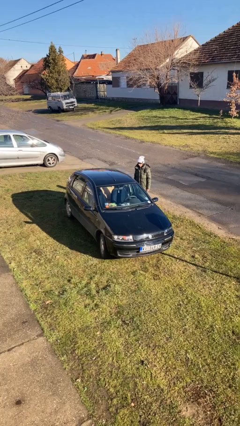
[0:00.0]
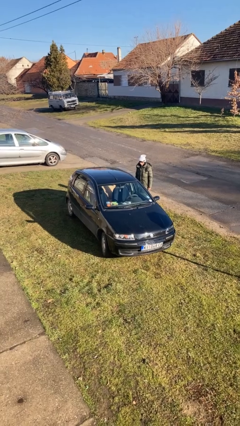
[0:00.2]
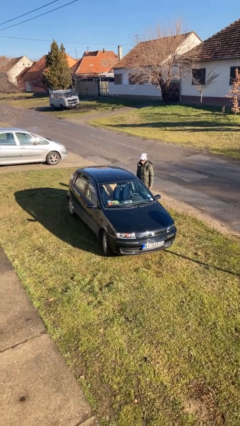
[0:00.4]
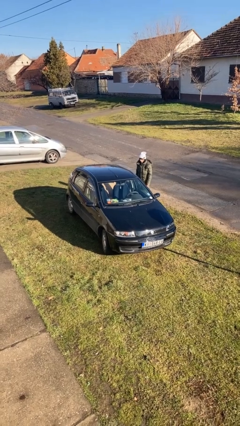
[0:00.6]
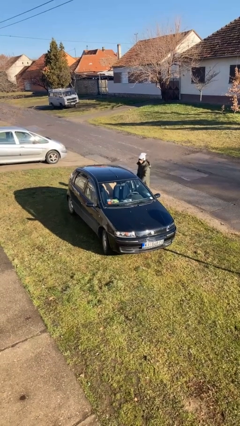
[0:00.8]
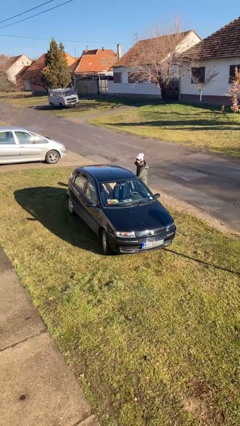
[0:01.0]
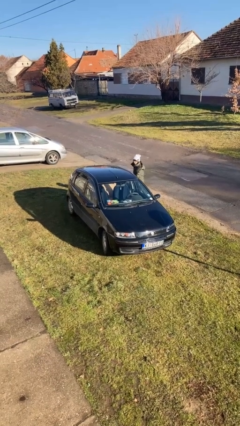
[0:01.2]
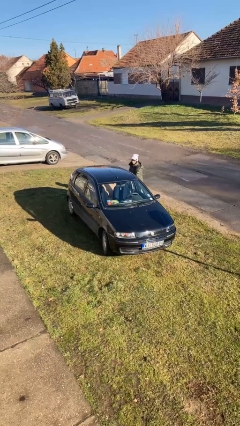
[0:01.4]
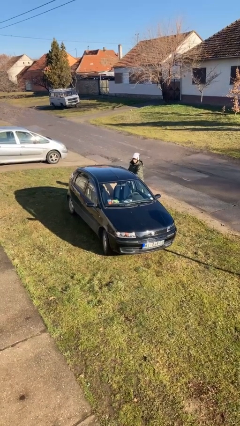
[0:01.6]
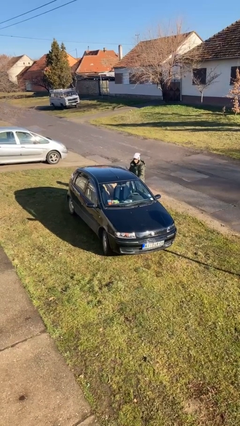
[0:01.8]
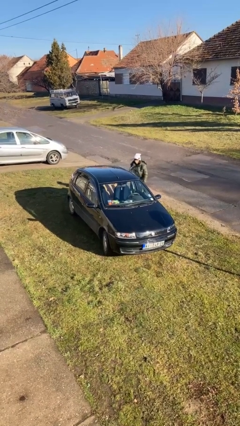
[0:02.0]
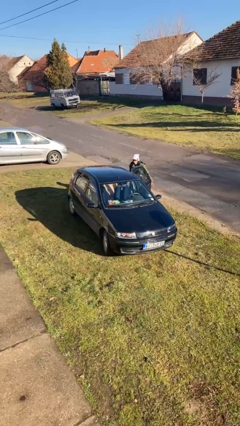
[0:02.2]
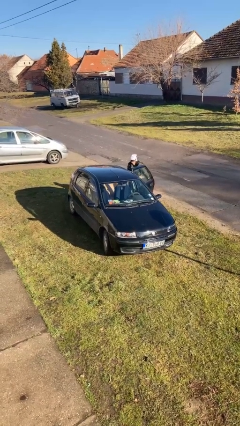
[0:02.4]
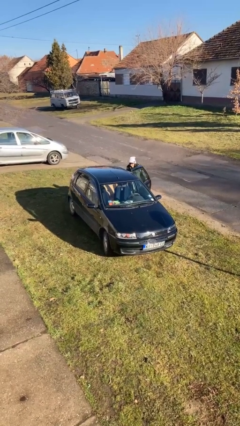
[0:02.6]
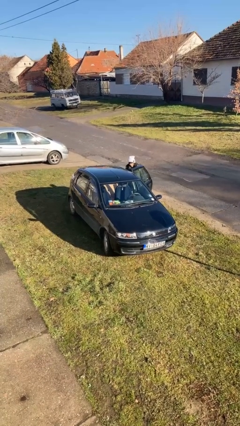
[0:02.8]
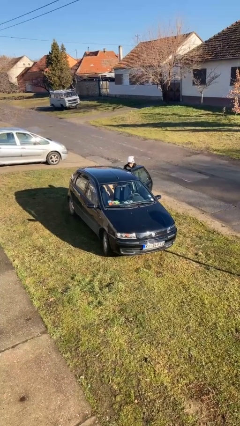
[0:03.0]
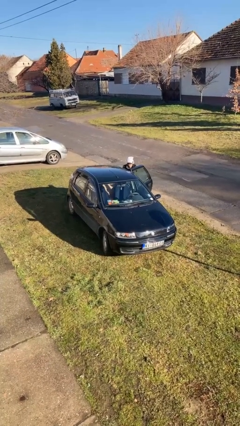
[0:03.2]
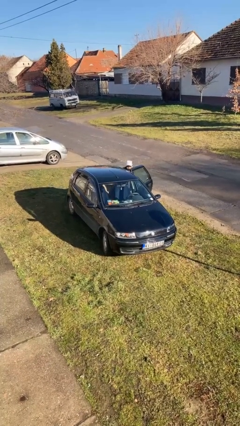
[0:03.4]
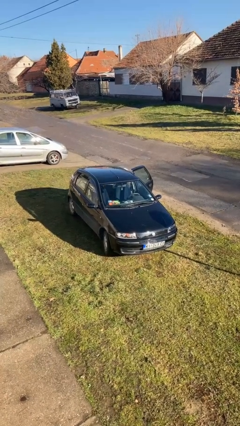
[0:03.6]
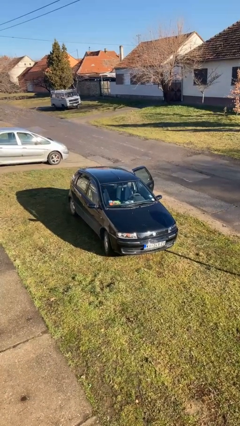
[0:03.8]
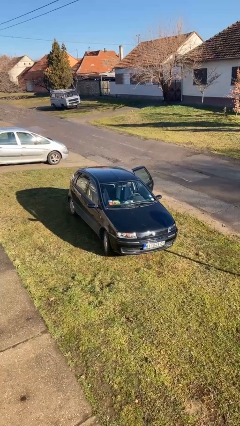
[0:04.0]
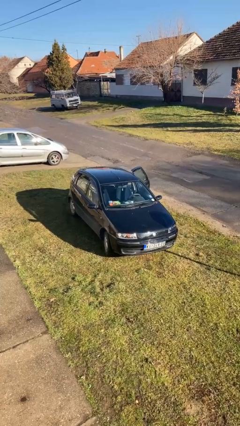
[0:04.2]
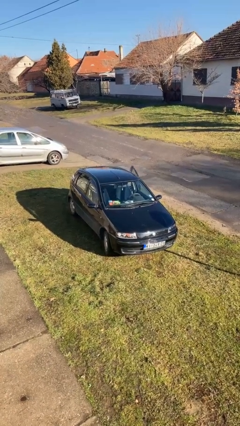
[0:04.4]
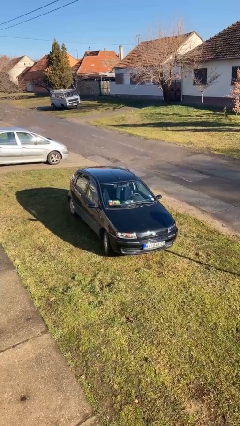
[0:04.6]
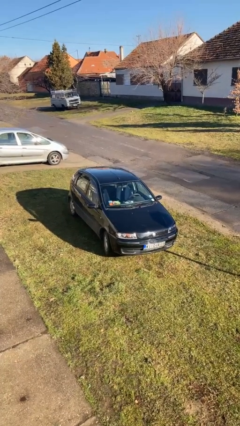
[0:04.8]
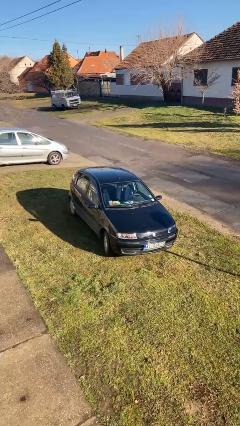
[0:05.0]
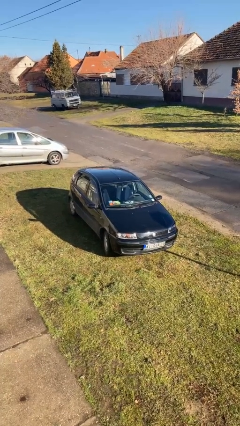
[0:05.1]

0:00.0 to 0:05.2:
car picks up person

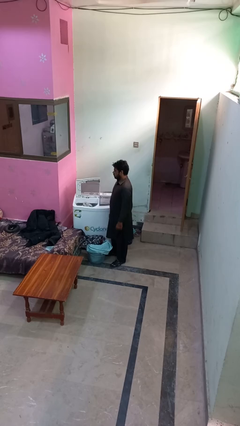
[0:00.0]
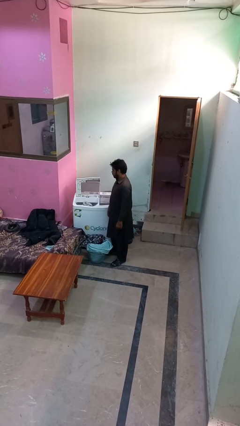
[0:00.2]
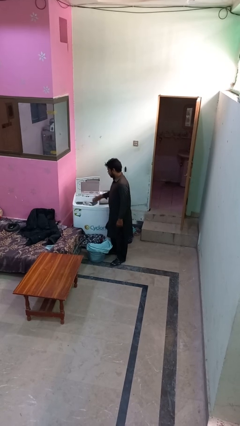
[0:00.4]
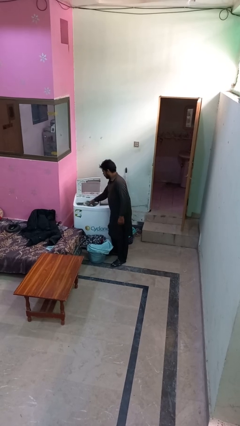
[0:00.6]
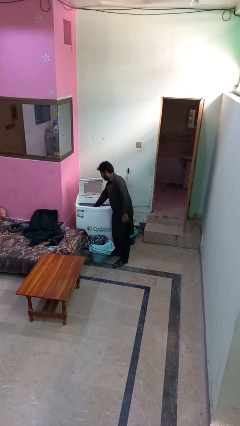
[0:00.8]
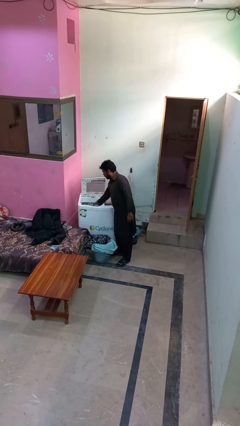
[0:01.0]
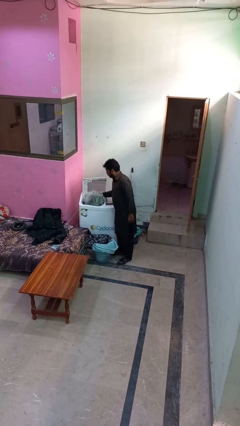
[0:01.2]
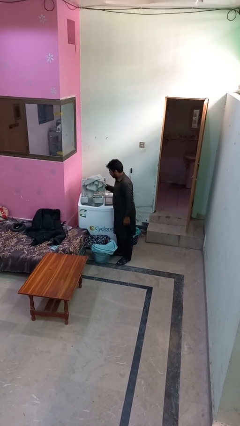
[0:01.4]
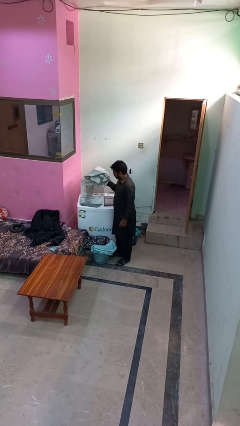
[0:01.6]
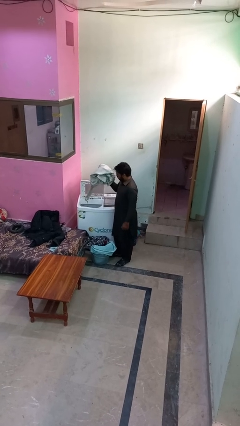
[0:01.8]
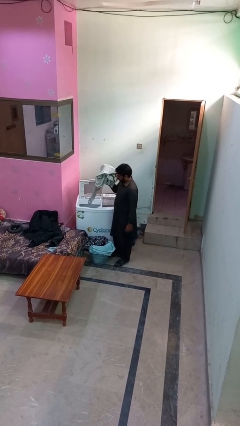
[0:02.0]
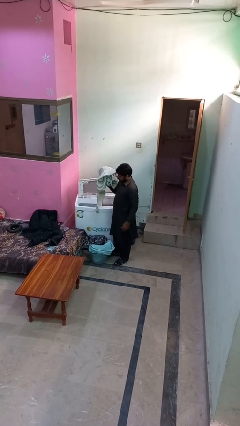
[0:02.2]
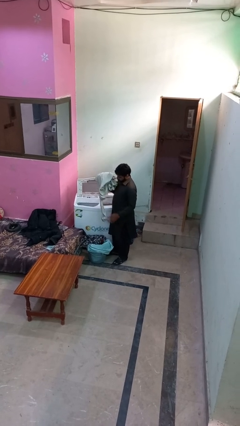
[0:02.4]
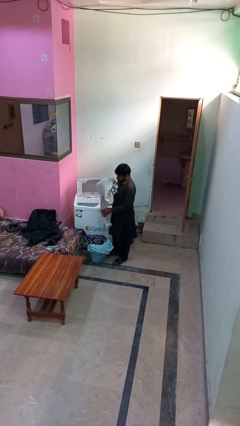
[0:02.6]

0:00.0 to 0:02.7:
person unloads clotheswasher

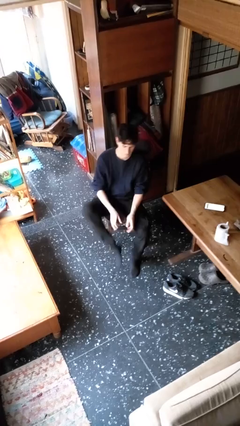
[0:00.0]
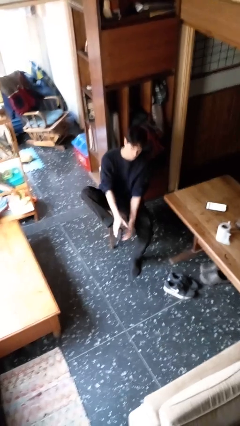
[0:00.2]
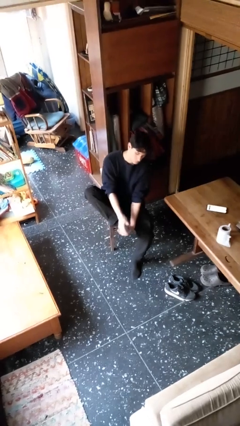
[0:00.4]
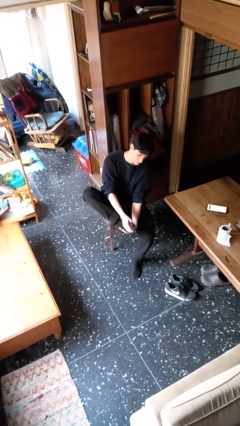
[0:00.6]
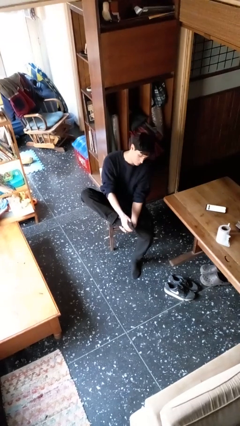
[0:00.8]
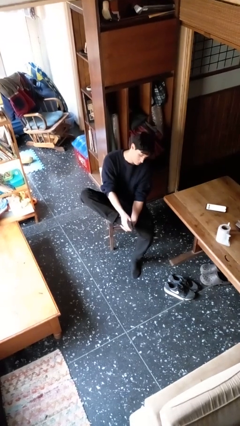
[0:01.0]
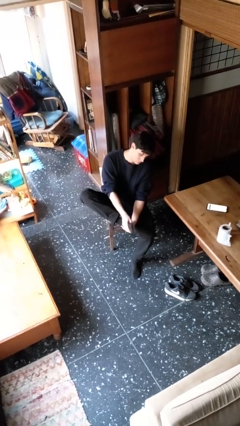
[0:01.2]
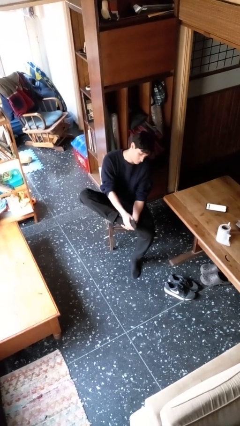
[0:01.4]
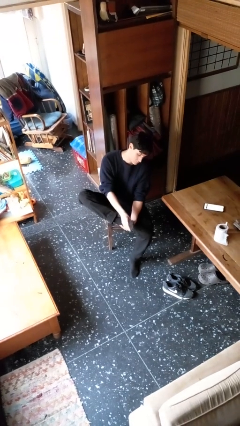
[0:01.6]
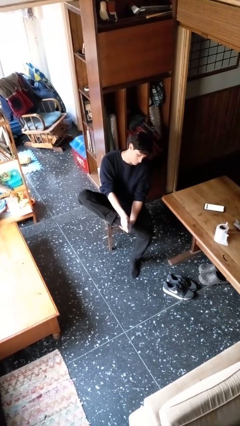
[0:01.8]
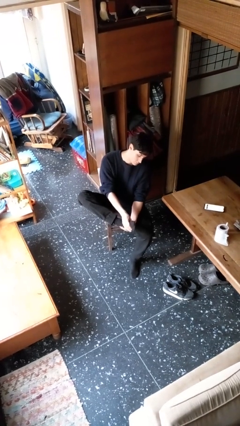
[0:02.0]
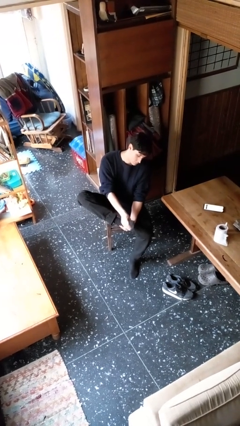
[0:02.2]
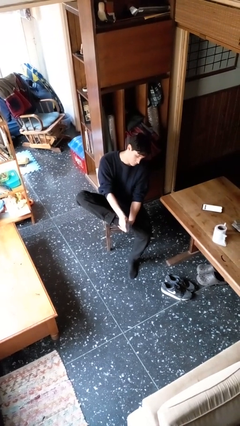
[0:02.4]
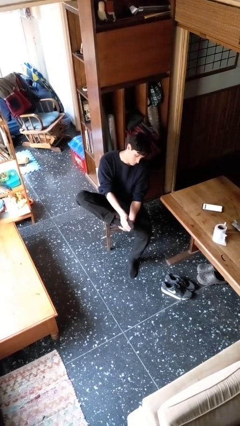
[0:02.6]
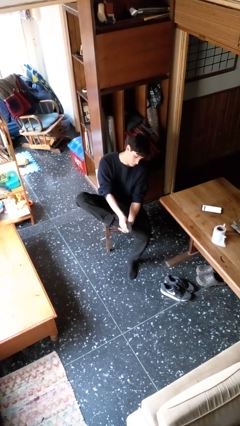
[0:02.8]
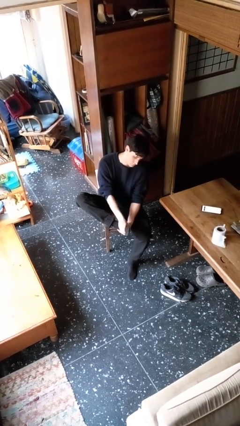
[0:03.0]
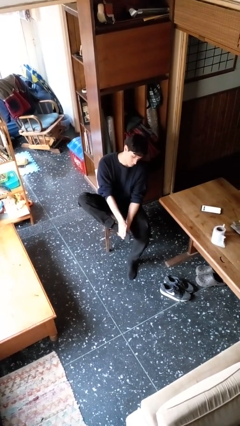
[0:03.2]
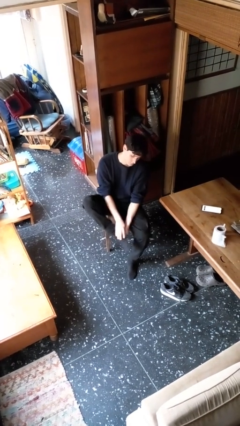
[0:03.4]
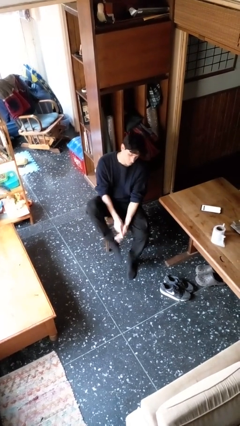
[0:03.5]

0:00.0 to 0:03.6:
person rubs foot

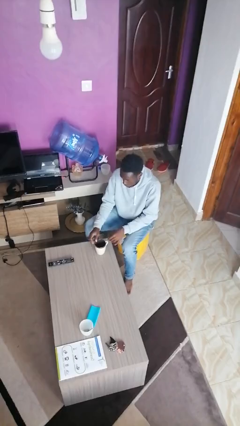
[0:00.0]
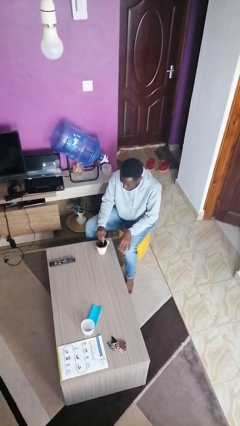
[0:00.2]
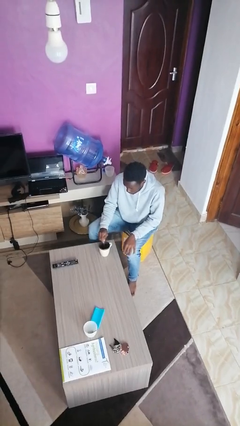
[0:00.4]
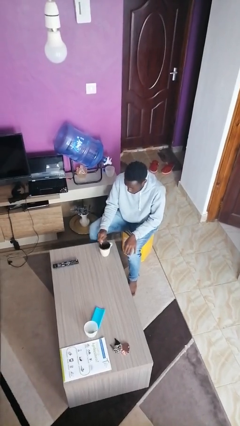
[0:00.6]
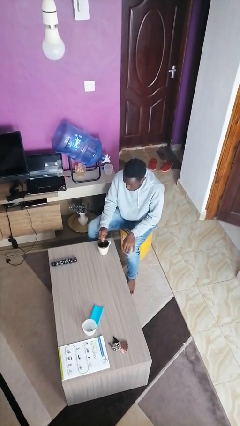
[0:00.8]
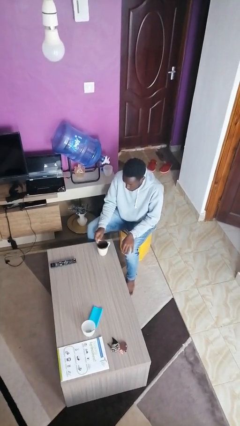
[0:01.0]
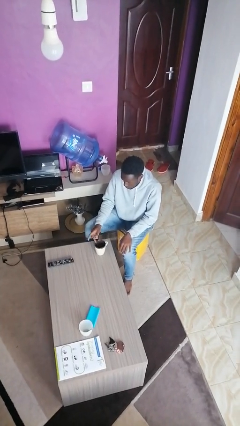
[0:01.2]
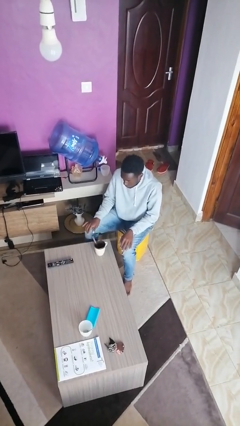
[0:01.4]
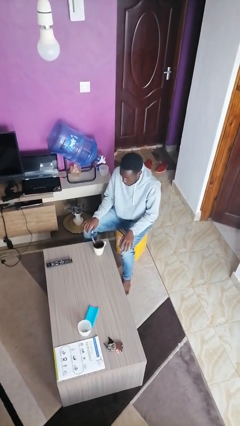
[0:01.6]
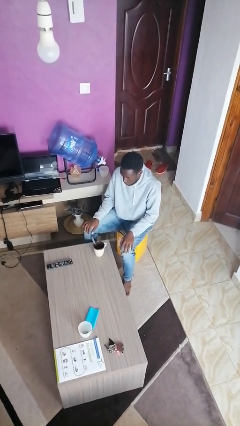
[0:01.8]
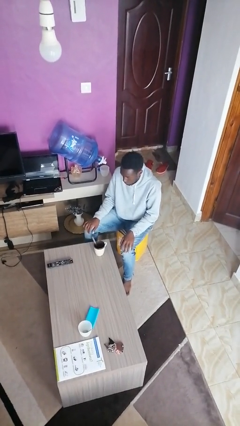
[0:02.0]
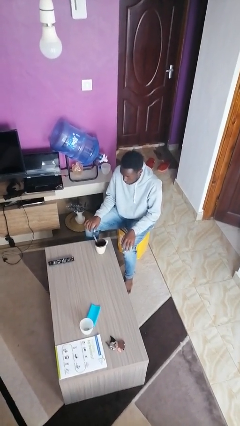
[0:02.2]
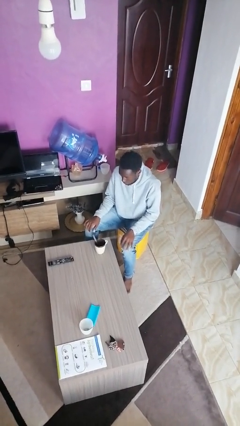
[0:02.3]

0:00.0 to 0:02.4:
person stirs mug

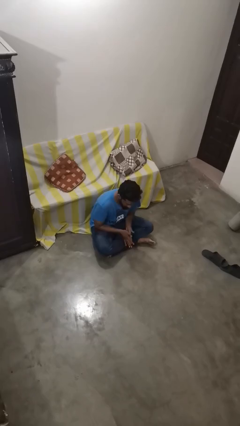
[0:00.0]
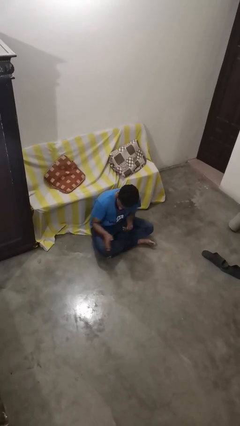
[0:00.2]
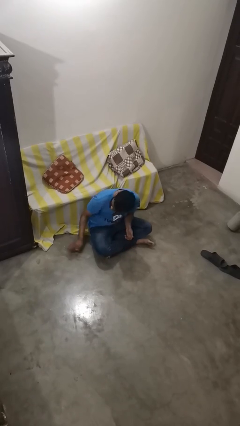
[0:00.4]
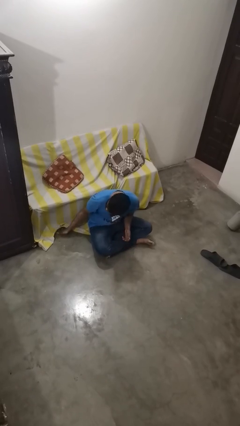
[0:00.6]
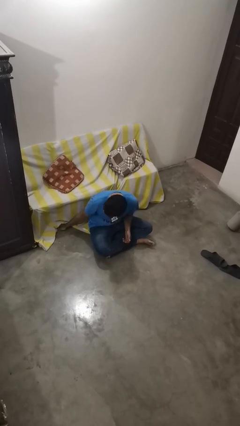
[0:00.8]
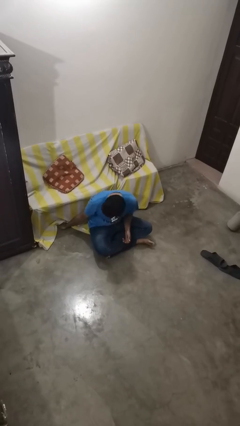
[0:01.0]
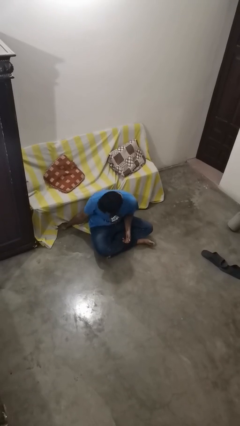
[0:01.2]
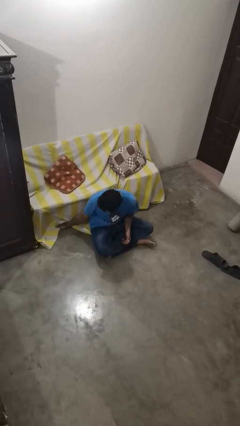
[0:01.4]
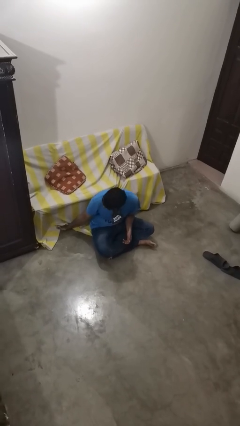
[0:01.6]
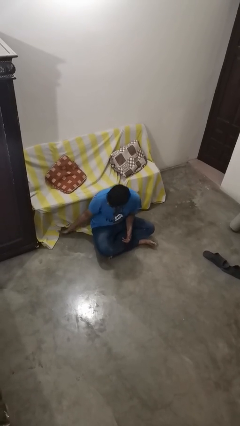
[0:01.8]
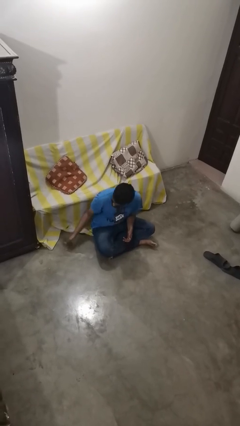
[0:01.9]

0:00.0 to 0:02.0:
person searches under couch

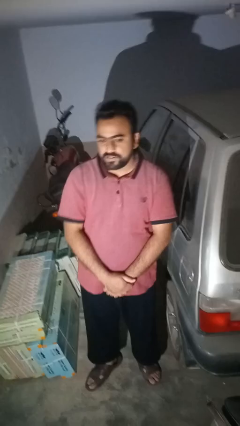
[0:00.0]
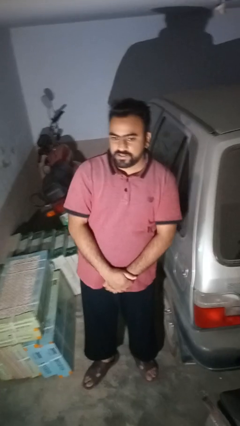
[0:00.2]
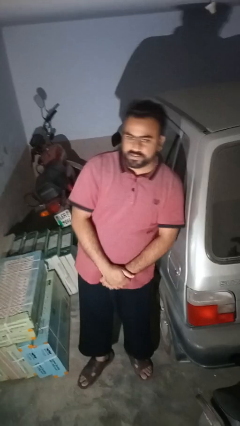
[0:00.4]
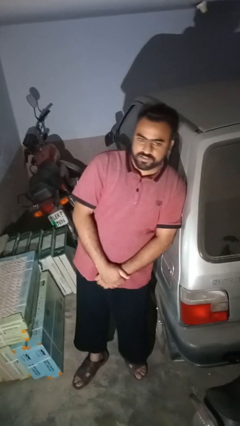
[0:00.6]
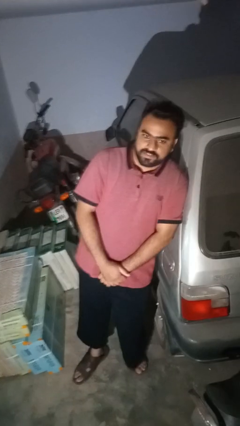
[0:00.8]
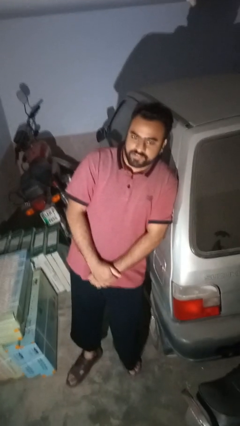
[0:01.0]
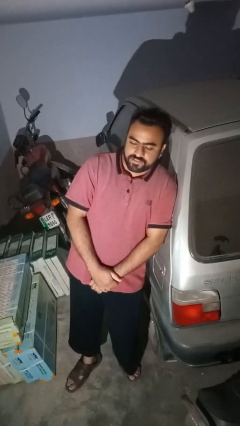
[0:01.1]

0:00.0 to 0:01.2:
person leans against car

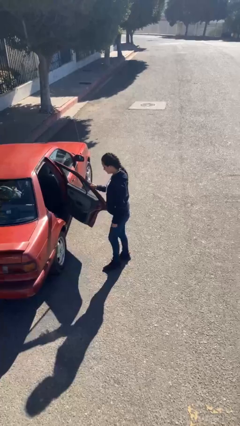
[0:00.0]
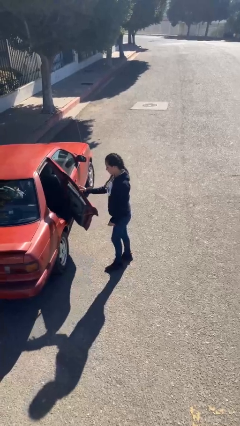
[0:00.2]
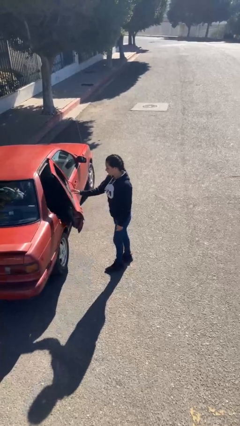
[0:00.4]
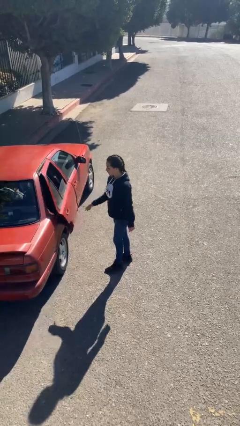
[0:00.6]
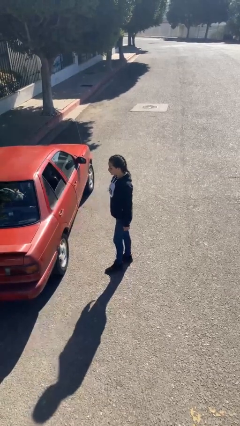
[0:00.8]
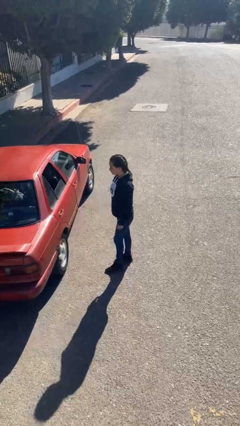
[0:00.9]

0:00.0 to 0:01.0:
person closes car door
